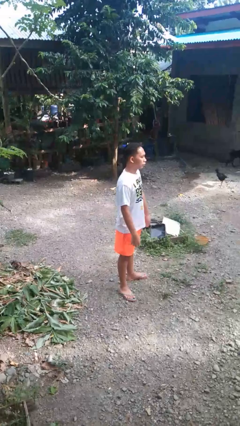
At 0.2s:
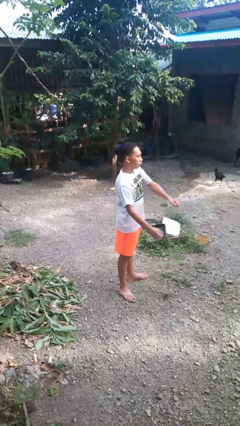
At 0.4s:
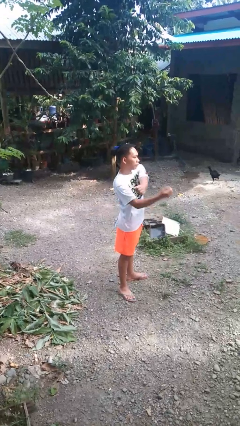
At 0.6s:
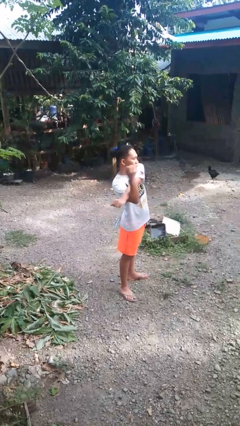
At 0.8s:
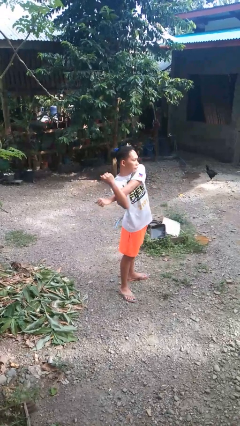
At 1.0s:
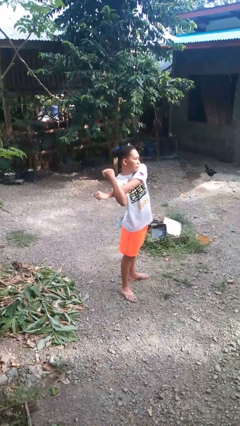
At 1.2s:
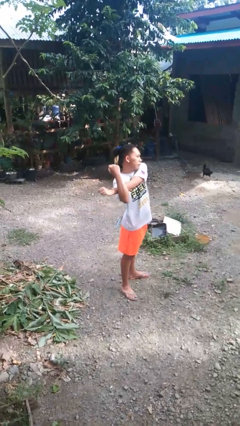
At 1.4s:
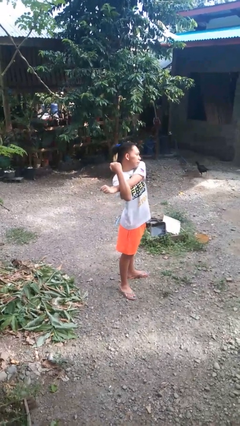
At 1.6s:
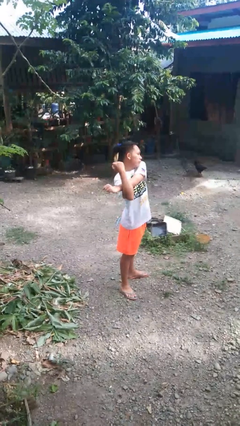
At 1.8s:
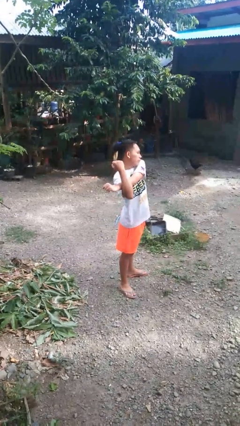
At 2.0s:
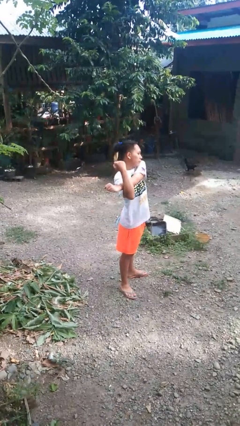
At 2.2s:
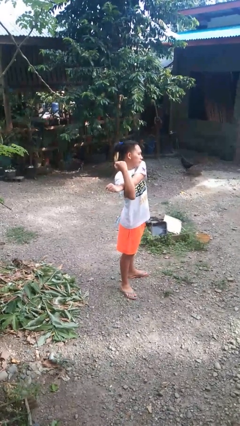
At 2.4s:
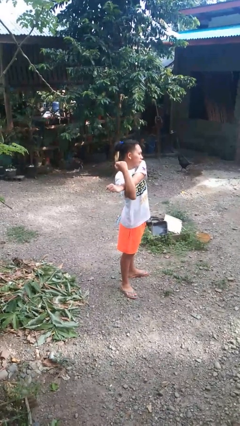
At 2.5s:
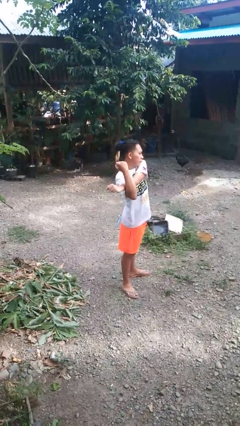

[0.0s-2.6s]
person stretches arms to side

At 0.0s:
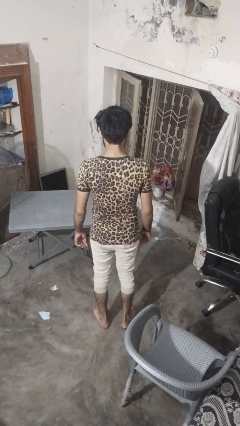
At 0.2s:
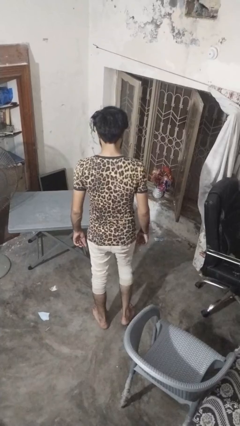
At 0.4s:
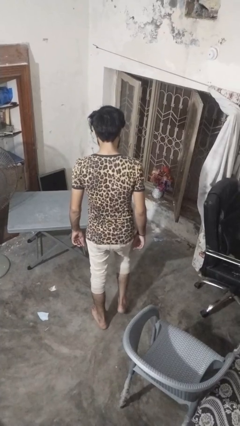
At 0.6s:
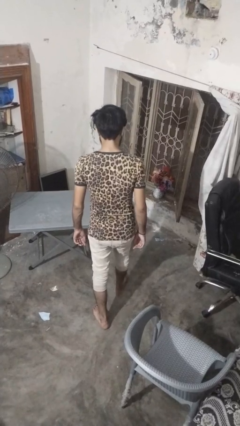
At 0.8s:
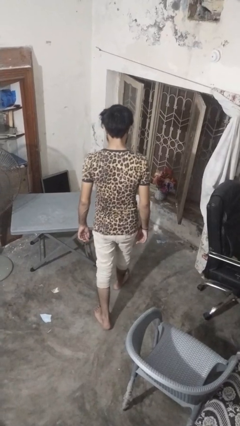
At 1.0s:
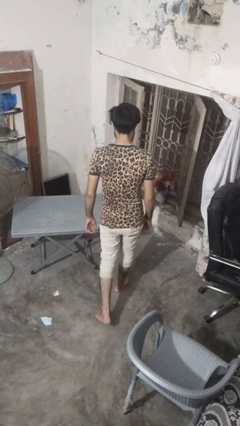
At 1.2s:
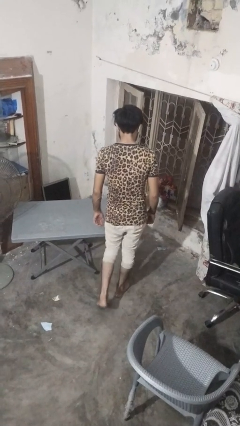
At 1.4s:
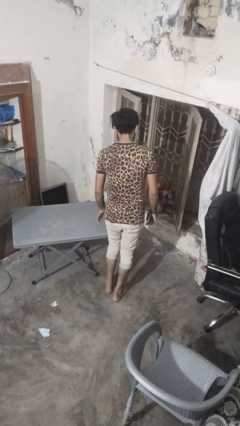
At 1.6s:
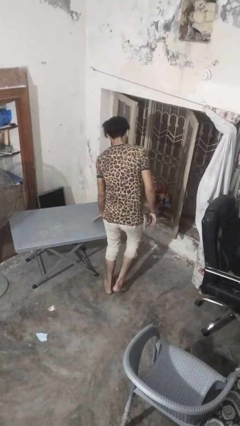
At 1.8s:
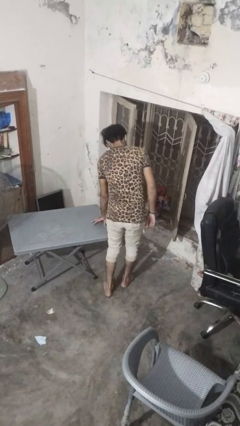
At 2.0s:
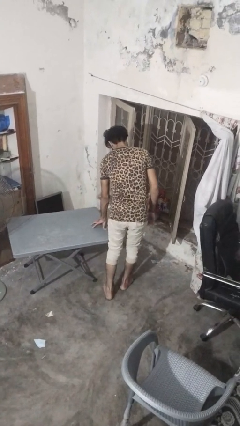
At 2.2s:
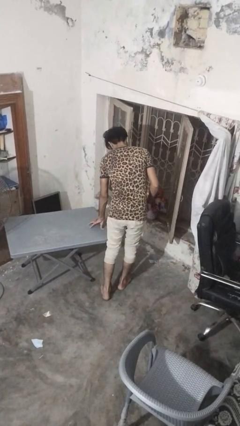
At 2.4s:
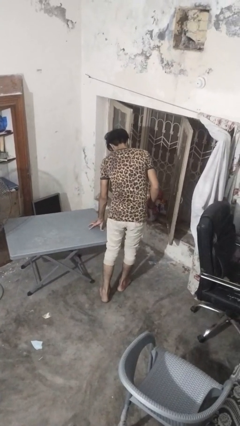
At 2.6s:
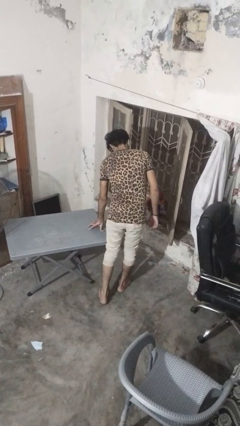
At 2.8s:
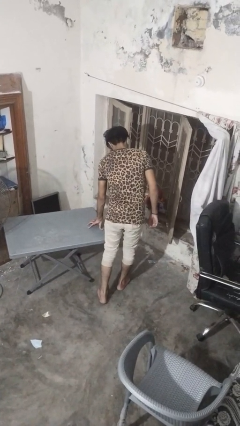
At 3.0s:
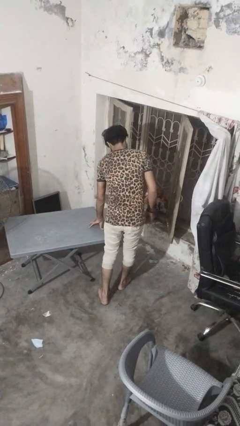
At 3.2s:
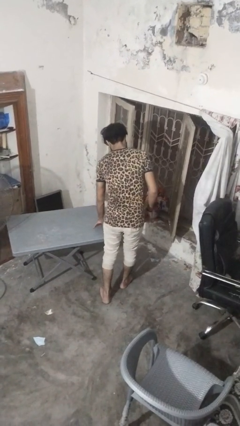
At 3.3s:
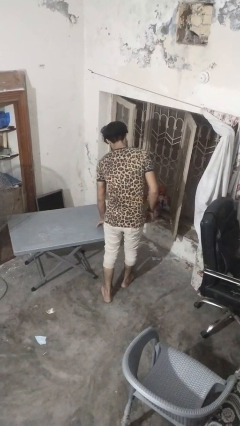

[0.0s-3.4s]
person bumps into table

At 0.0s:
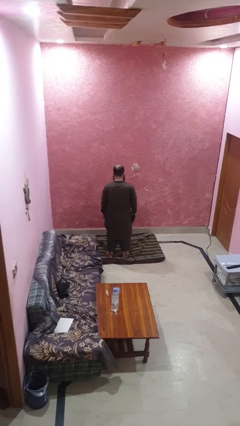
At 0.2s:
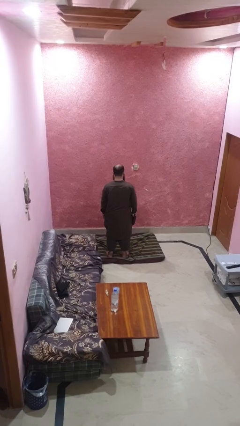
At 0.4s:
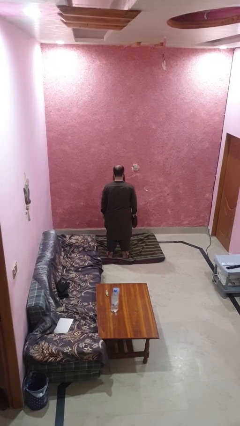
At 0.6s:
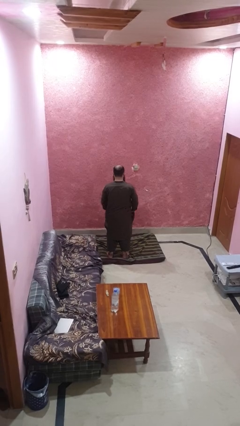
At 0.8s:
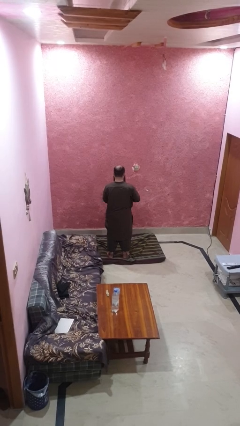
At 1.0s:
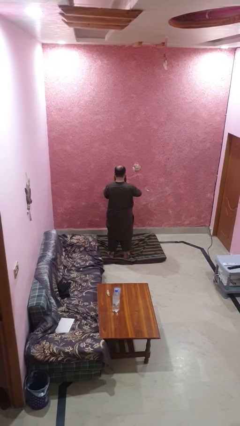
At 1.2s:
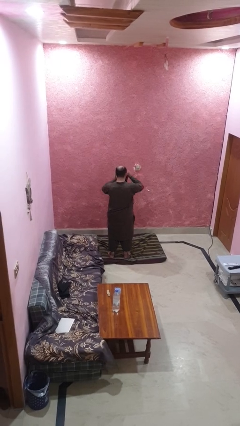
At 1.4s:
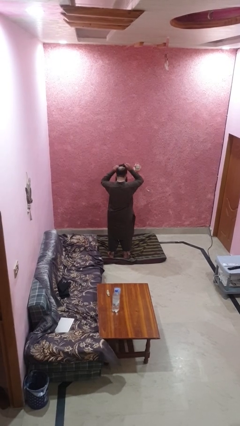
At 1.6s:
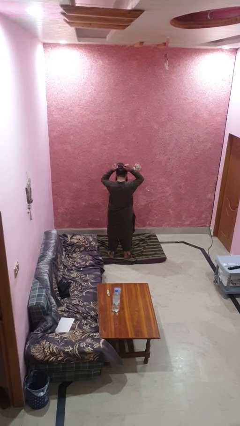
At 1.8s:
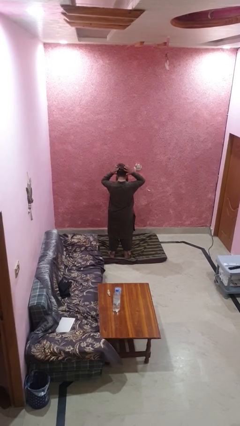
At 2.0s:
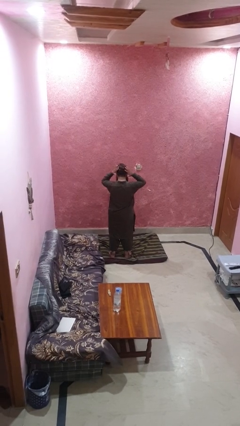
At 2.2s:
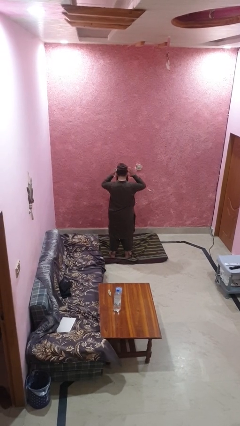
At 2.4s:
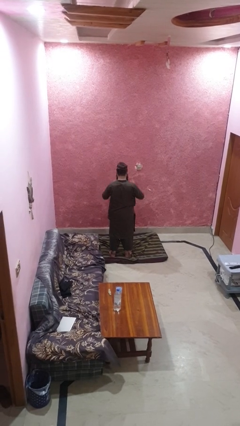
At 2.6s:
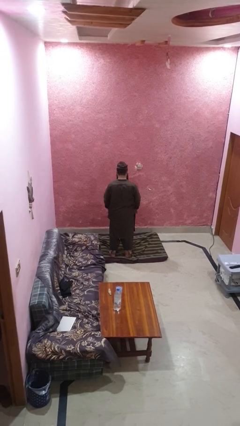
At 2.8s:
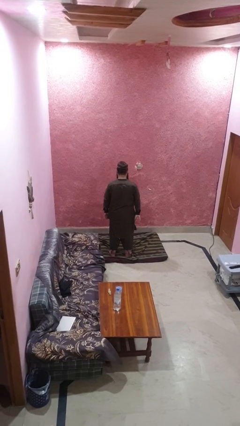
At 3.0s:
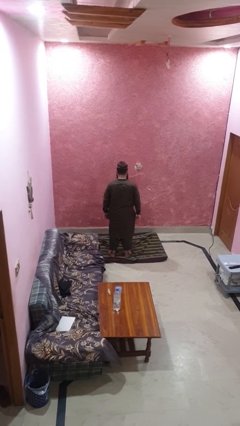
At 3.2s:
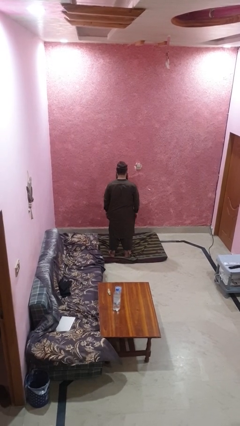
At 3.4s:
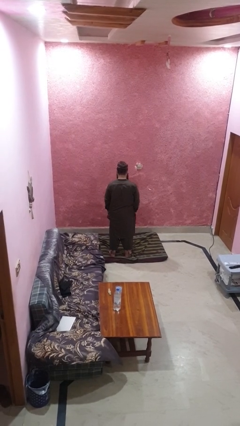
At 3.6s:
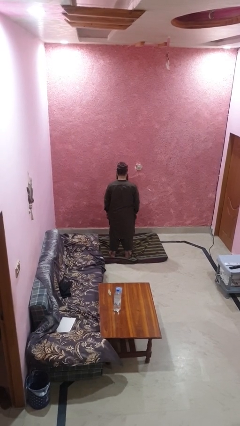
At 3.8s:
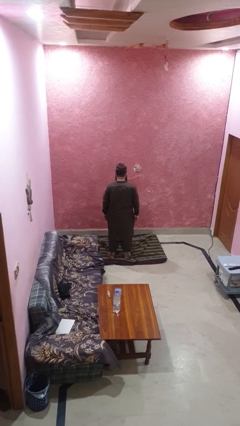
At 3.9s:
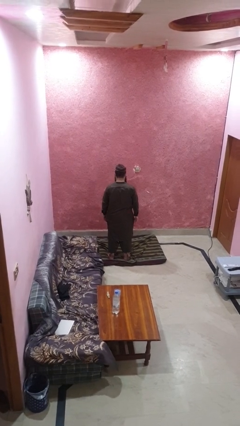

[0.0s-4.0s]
person puts on hat

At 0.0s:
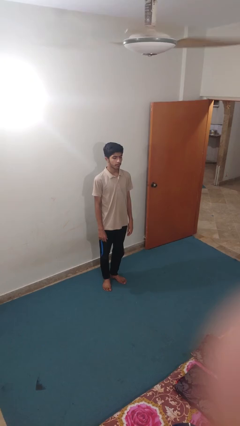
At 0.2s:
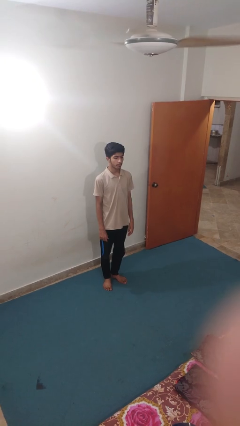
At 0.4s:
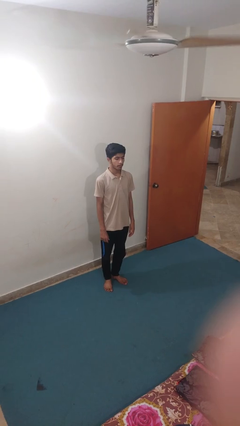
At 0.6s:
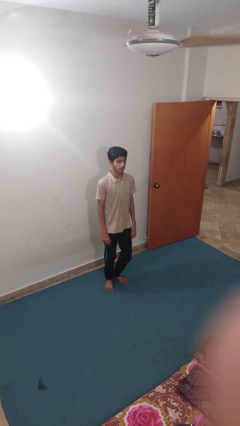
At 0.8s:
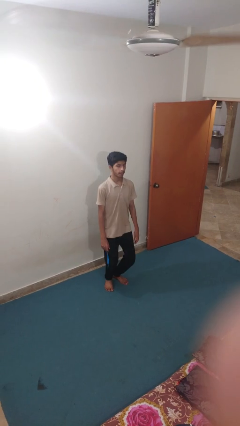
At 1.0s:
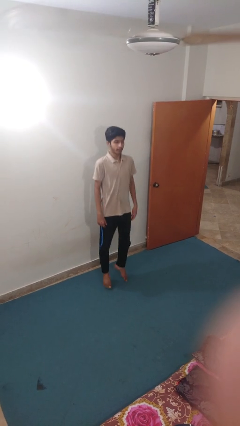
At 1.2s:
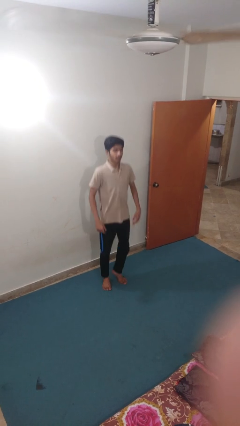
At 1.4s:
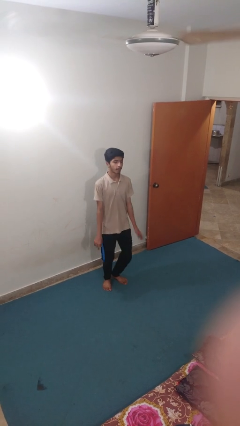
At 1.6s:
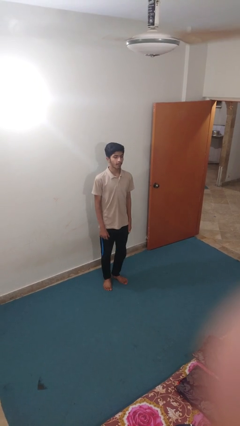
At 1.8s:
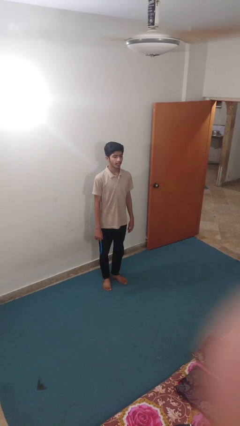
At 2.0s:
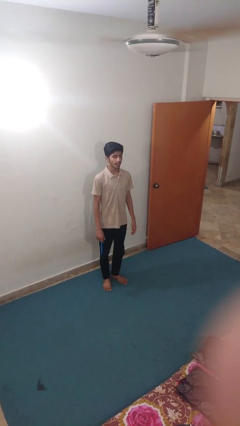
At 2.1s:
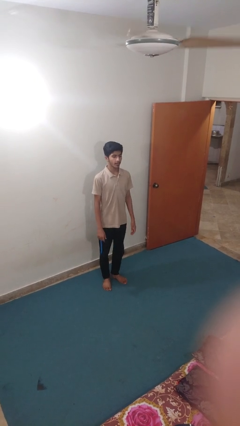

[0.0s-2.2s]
person jumps

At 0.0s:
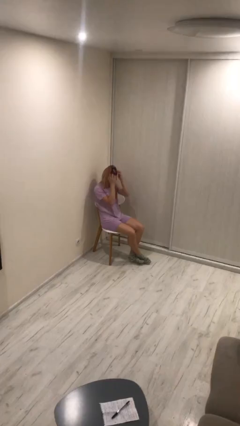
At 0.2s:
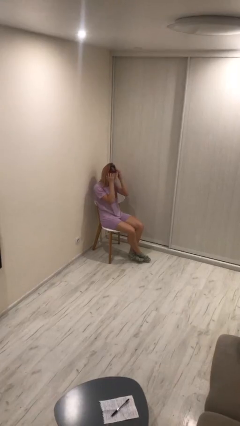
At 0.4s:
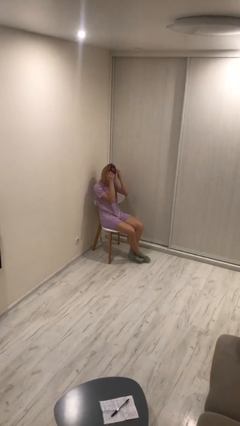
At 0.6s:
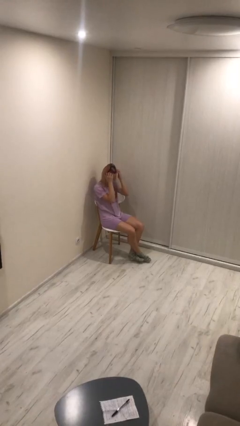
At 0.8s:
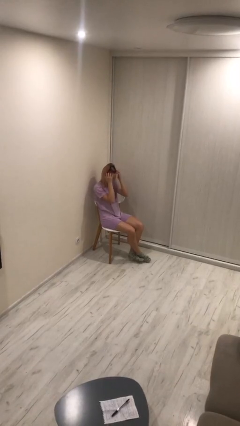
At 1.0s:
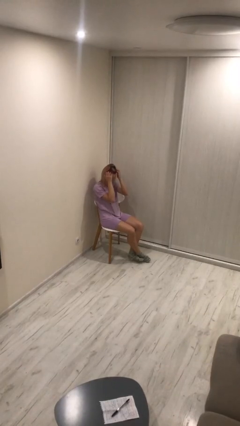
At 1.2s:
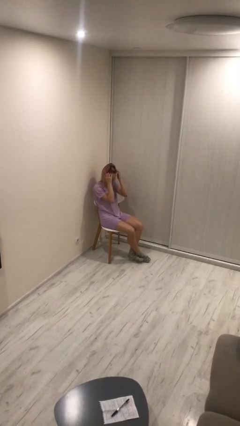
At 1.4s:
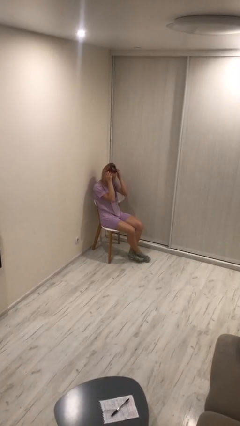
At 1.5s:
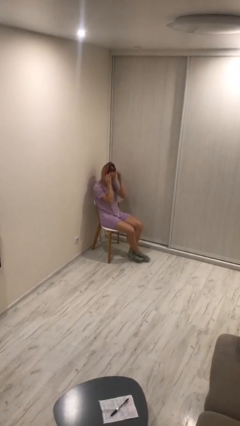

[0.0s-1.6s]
person scratches face

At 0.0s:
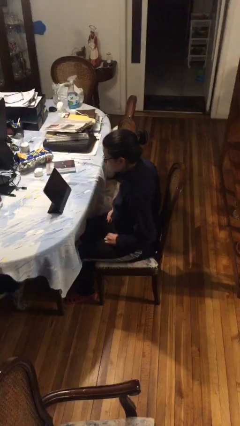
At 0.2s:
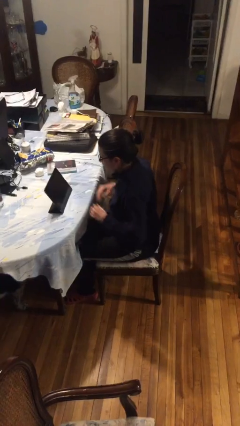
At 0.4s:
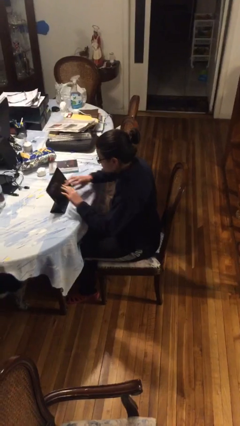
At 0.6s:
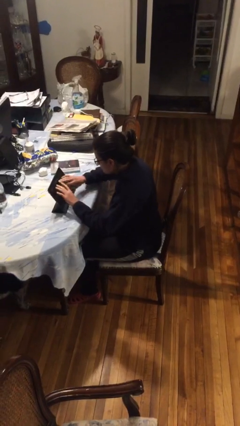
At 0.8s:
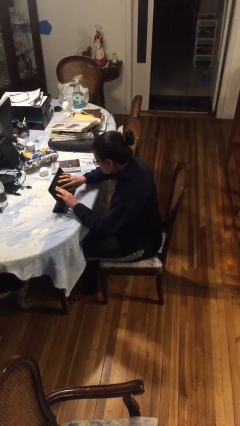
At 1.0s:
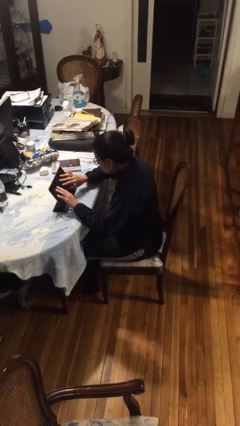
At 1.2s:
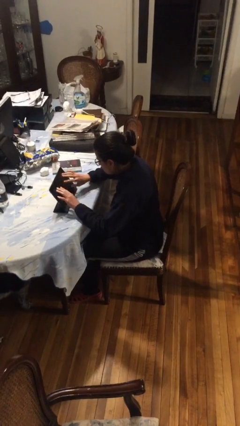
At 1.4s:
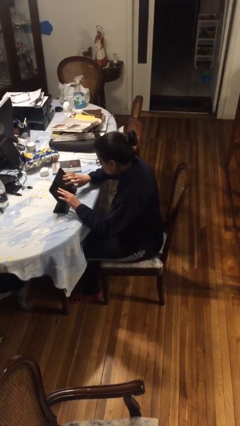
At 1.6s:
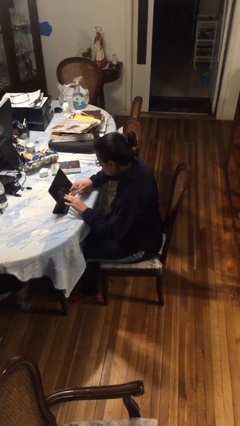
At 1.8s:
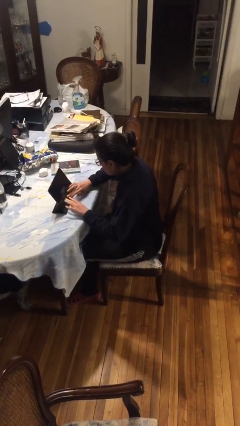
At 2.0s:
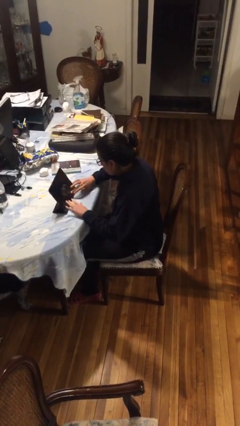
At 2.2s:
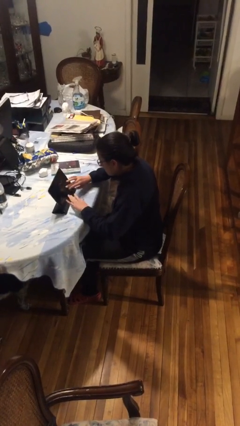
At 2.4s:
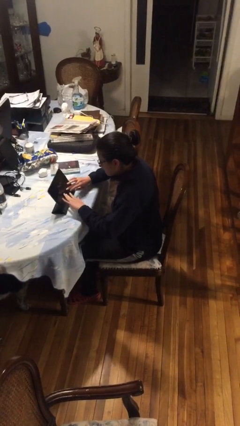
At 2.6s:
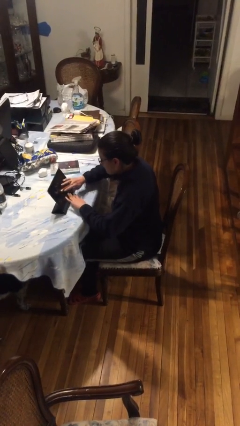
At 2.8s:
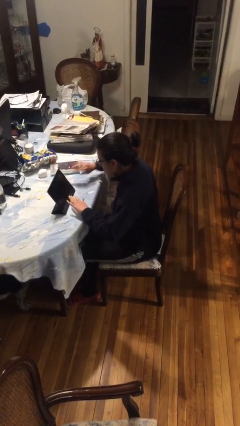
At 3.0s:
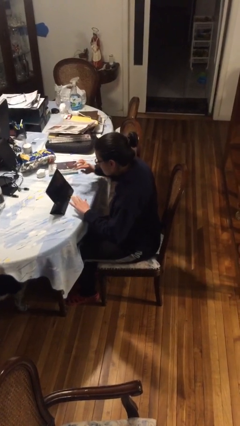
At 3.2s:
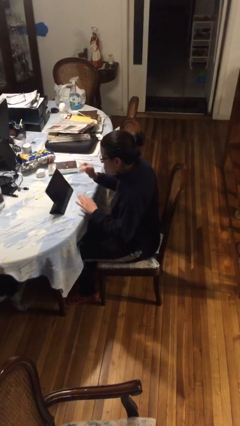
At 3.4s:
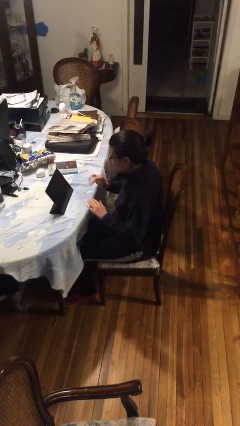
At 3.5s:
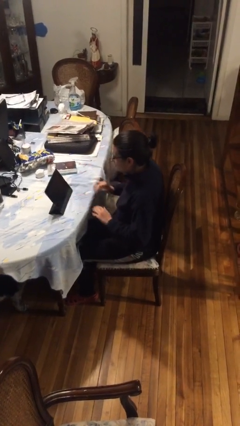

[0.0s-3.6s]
person interacts with tablet
